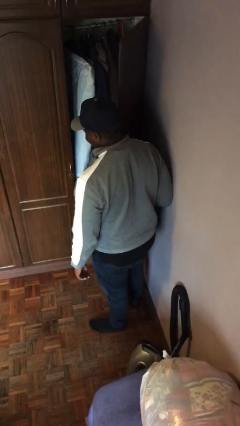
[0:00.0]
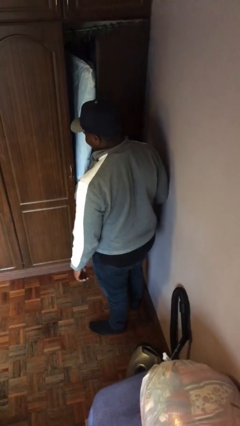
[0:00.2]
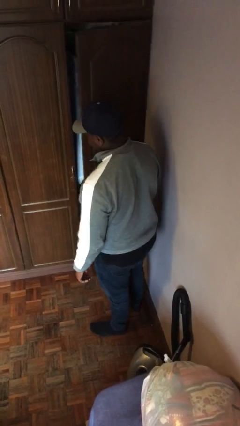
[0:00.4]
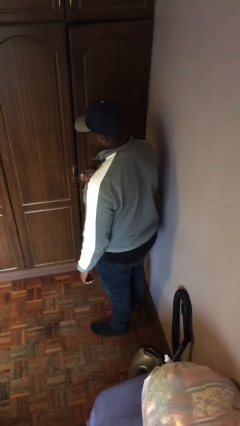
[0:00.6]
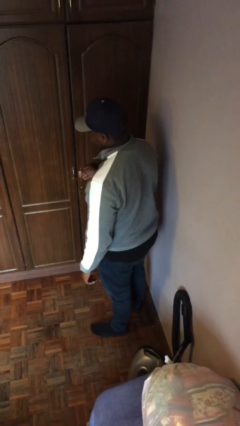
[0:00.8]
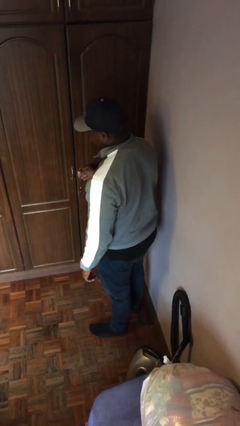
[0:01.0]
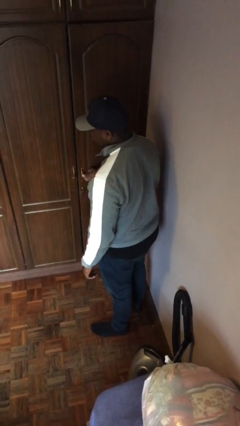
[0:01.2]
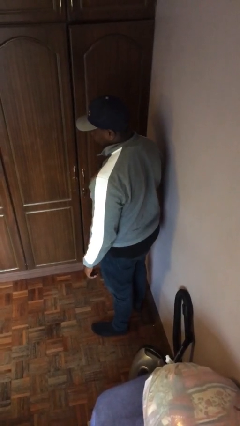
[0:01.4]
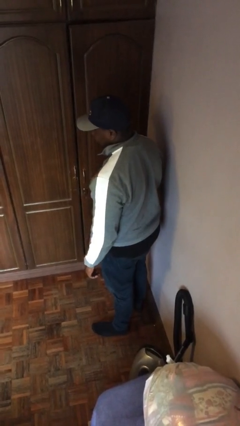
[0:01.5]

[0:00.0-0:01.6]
person closes closet door

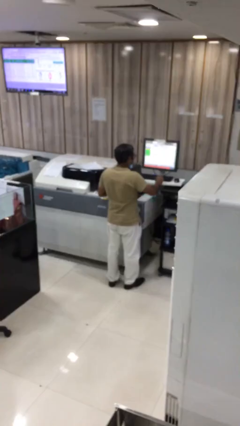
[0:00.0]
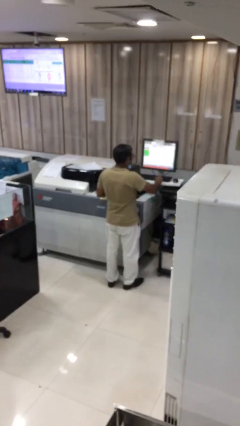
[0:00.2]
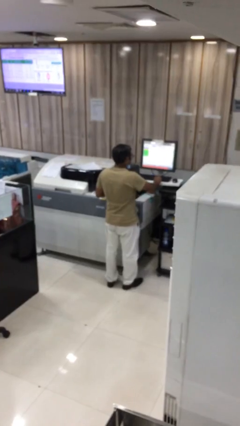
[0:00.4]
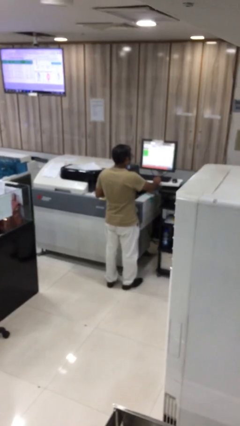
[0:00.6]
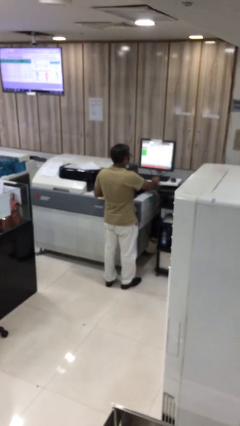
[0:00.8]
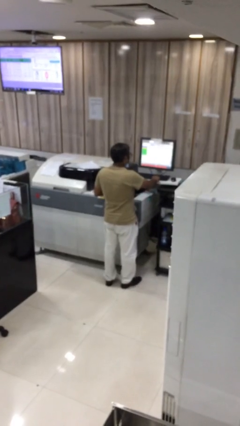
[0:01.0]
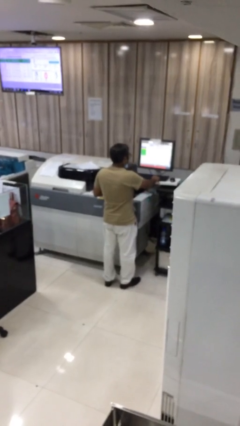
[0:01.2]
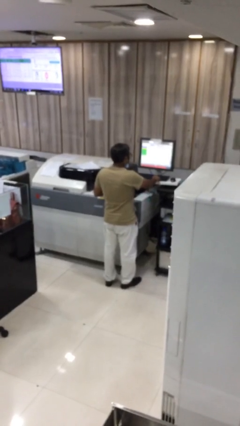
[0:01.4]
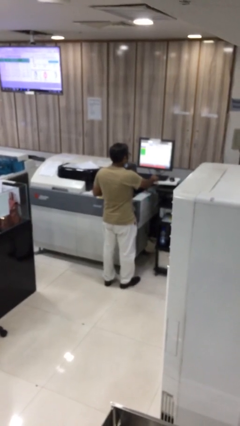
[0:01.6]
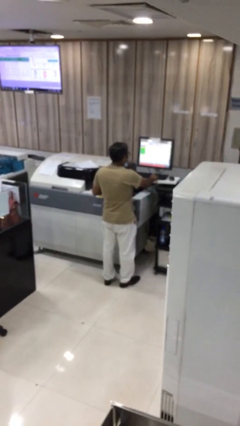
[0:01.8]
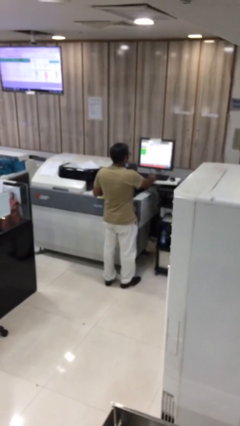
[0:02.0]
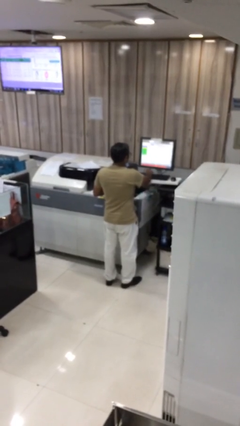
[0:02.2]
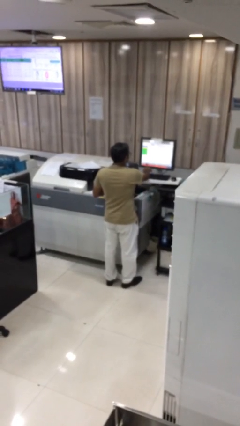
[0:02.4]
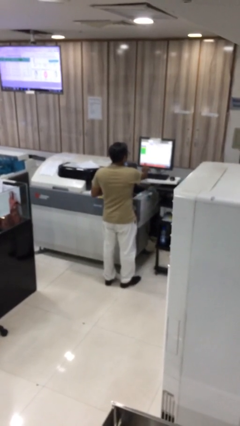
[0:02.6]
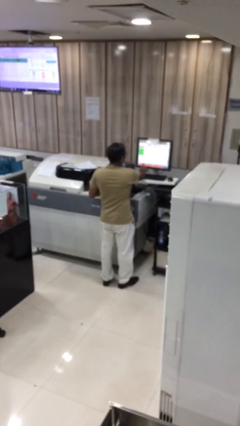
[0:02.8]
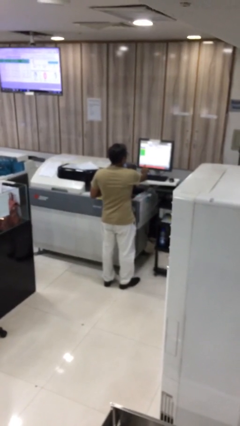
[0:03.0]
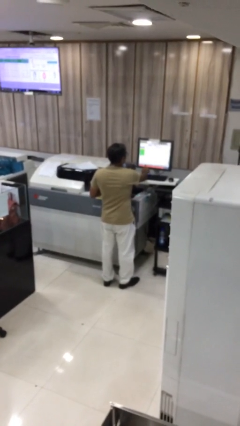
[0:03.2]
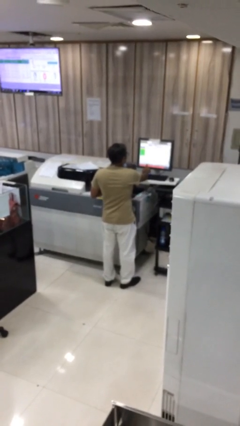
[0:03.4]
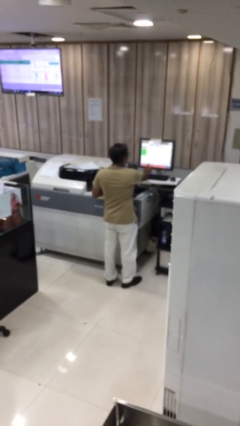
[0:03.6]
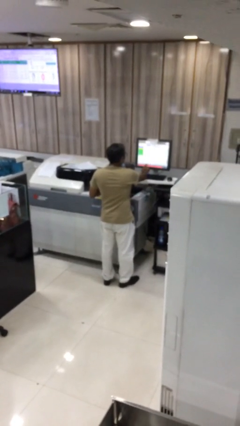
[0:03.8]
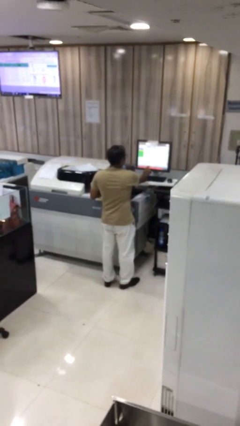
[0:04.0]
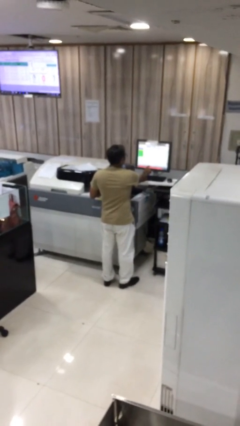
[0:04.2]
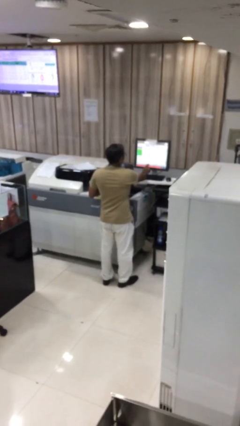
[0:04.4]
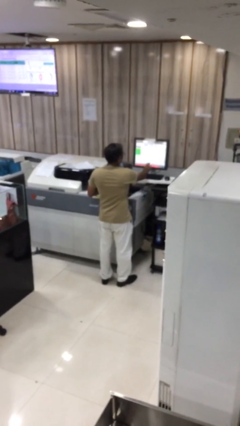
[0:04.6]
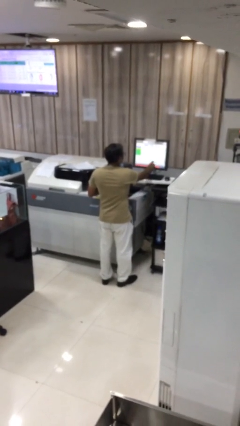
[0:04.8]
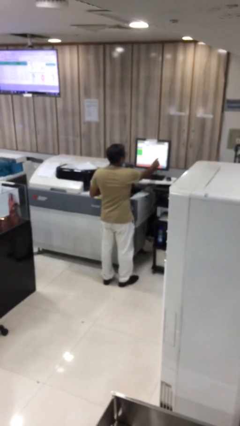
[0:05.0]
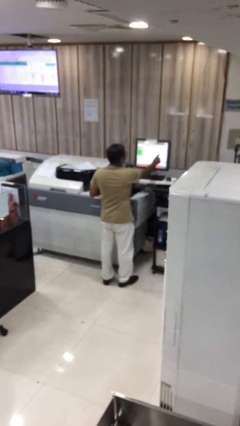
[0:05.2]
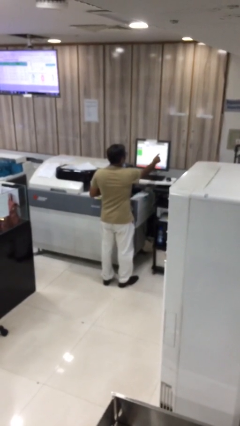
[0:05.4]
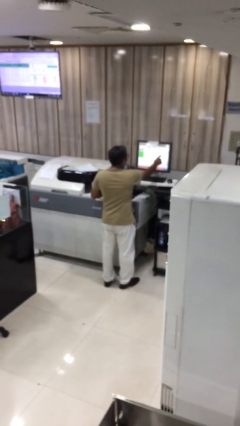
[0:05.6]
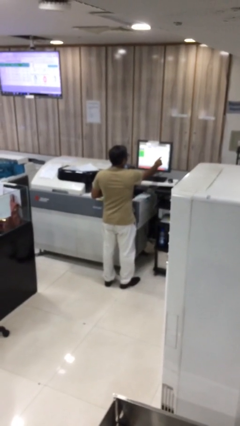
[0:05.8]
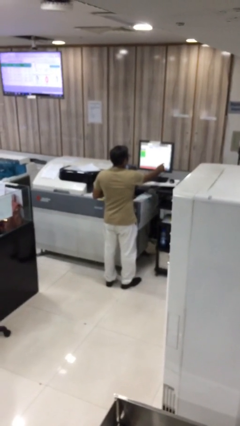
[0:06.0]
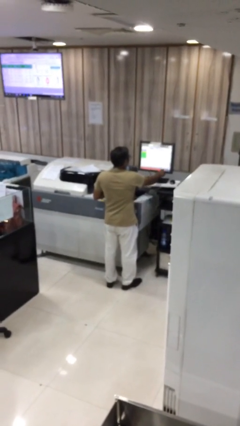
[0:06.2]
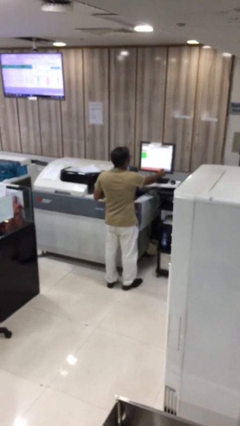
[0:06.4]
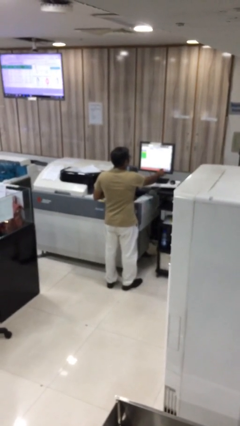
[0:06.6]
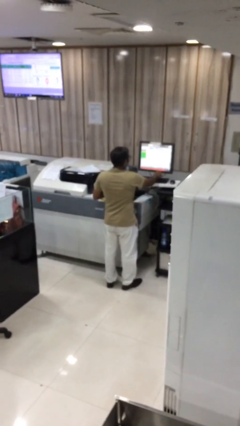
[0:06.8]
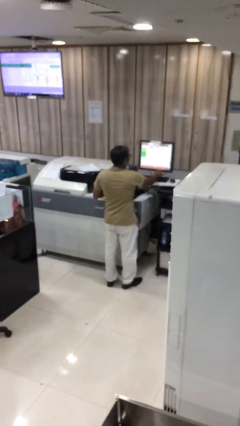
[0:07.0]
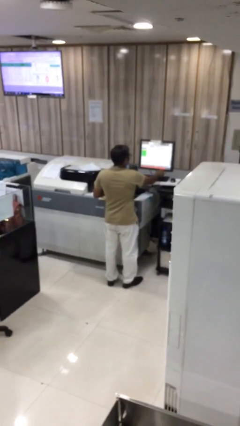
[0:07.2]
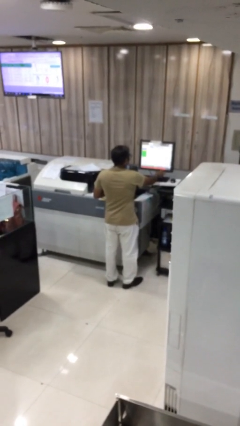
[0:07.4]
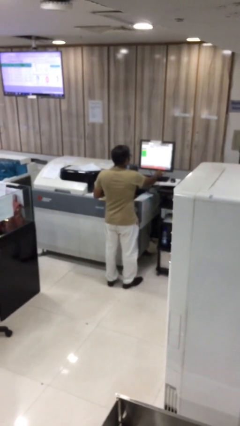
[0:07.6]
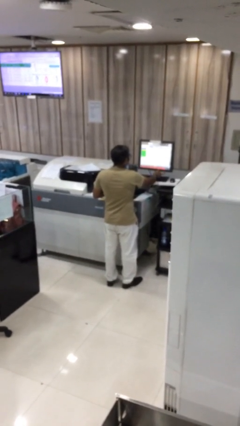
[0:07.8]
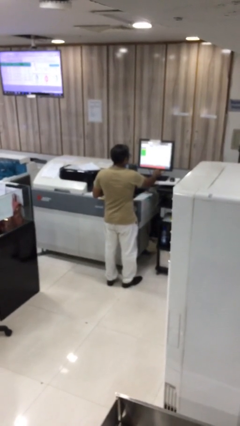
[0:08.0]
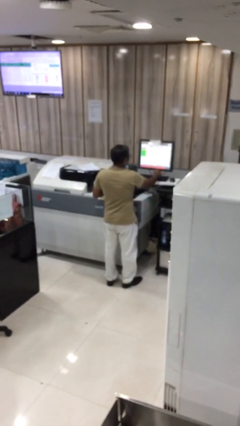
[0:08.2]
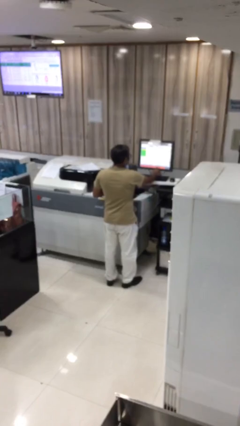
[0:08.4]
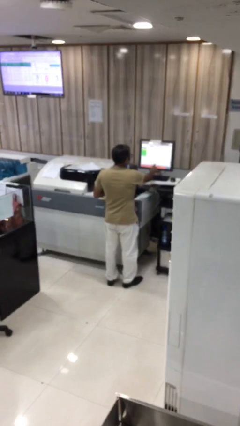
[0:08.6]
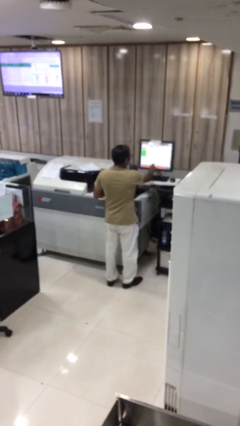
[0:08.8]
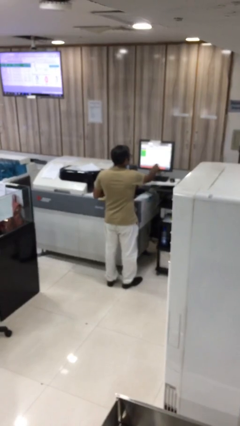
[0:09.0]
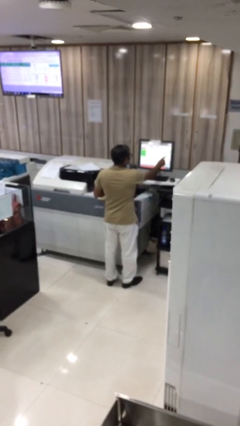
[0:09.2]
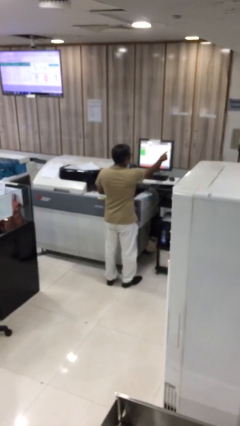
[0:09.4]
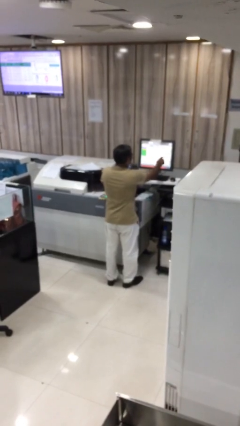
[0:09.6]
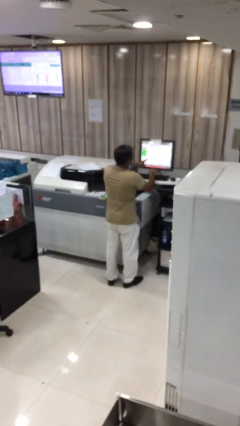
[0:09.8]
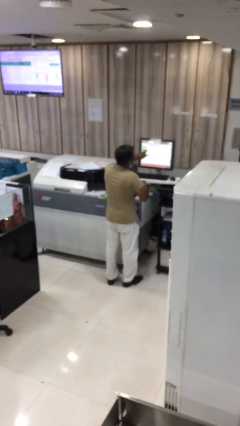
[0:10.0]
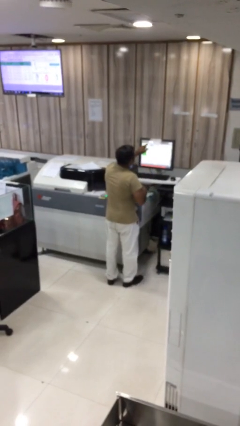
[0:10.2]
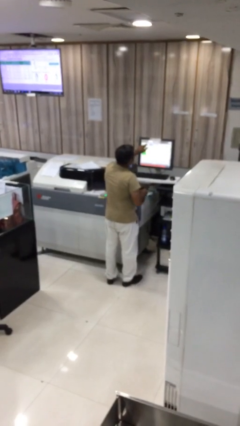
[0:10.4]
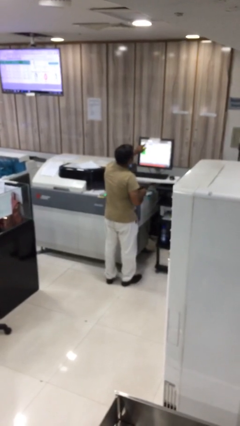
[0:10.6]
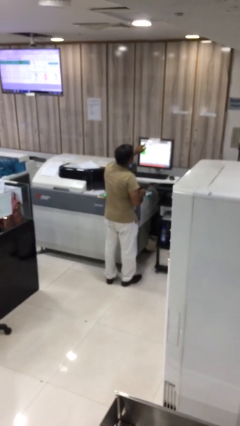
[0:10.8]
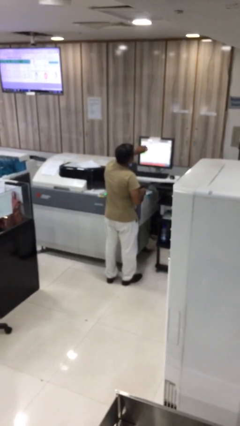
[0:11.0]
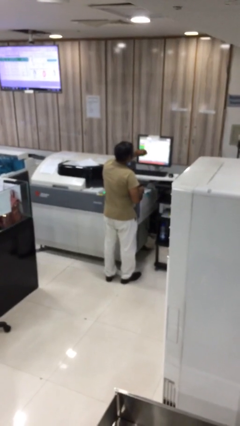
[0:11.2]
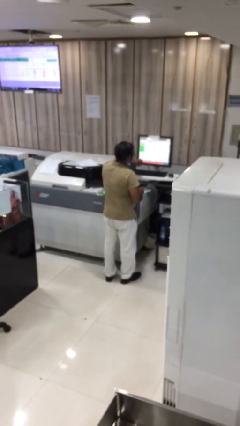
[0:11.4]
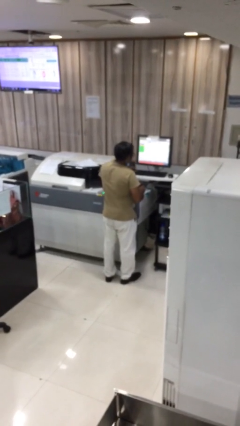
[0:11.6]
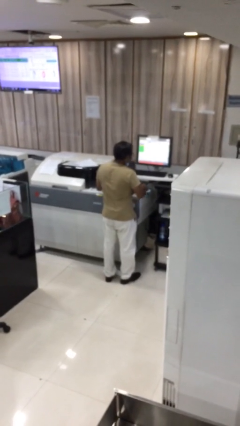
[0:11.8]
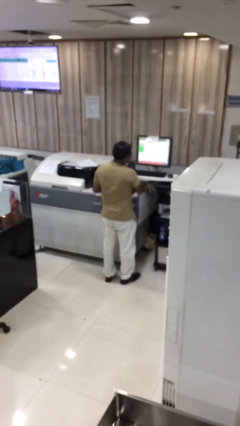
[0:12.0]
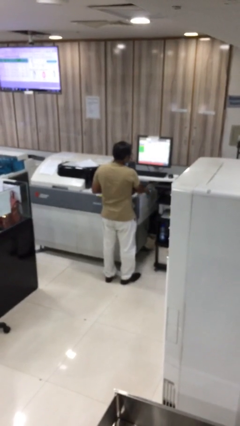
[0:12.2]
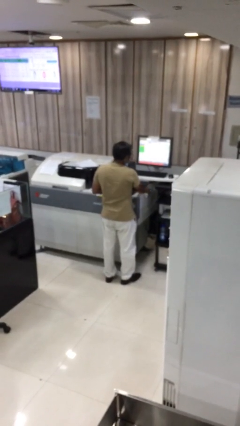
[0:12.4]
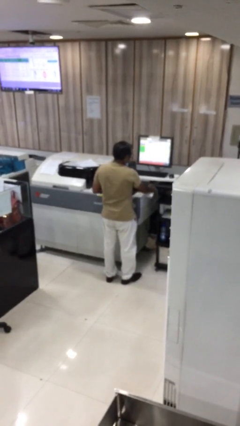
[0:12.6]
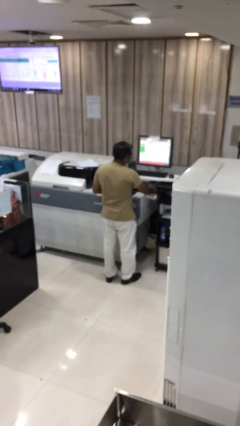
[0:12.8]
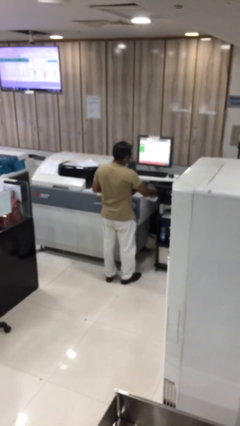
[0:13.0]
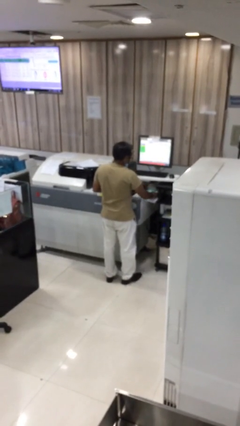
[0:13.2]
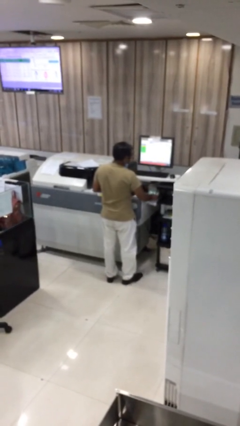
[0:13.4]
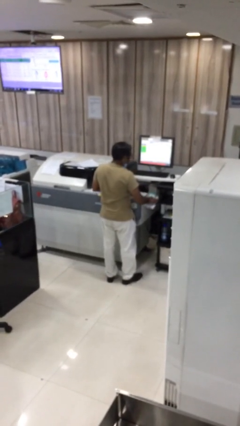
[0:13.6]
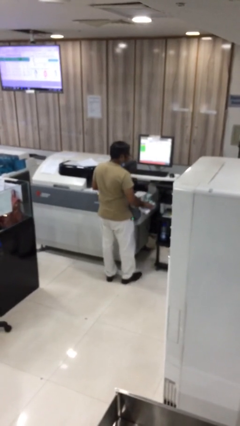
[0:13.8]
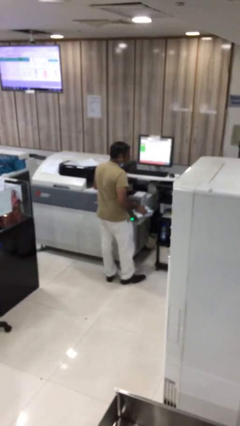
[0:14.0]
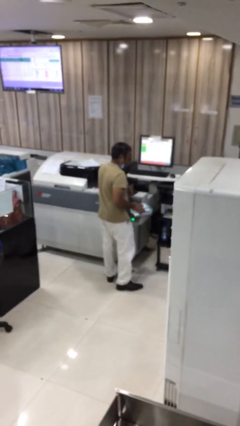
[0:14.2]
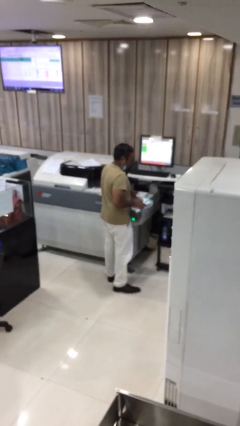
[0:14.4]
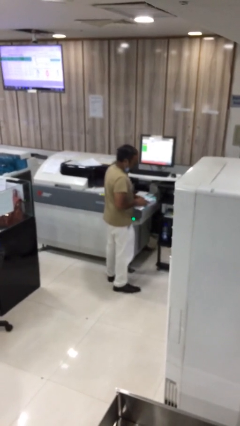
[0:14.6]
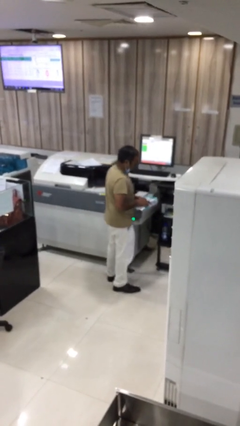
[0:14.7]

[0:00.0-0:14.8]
person purchases from machine

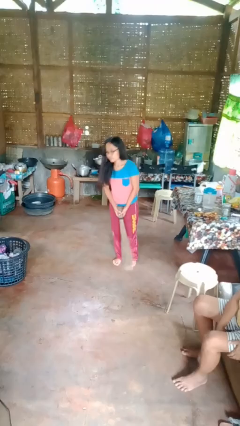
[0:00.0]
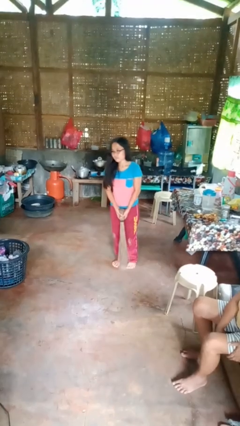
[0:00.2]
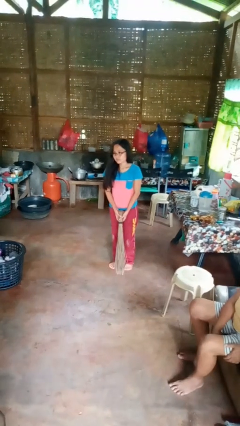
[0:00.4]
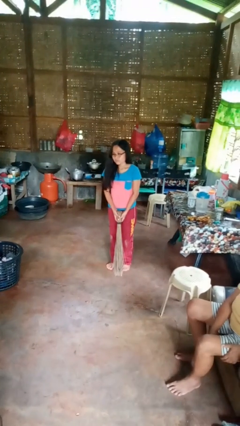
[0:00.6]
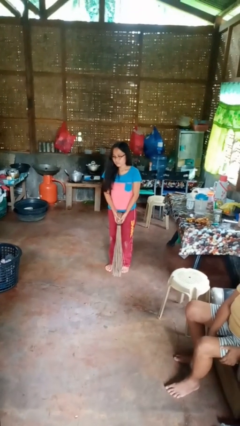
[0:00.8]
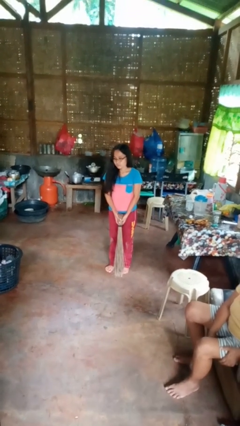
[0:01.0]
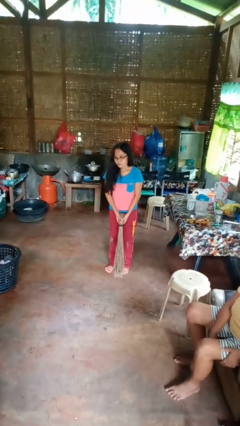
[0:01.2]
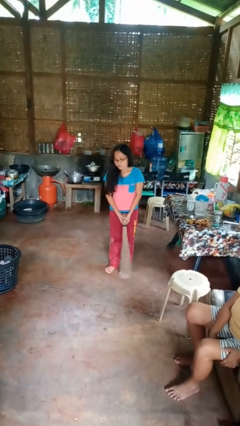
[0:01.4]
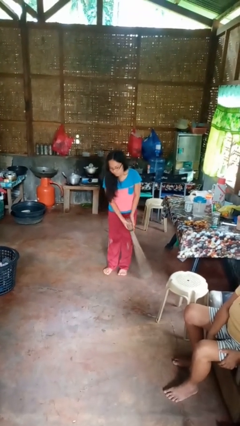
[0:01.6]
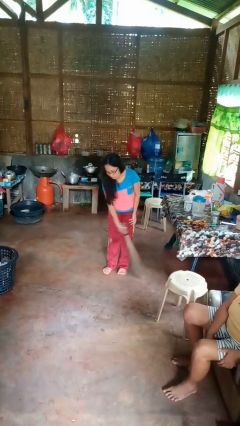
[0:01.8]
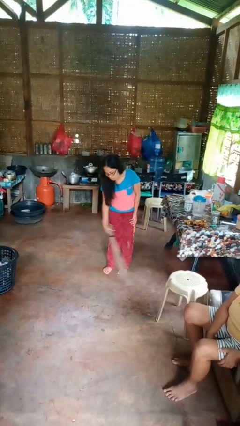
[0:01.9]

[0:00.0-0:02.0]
person sweeps floor
